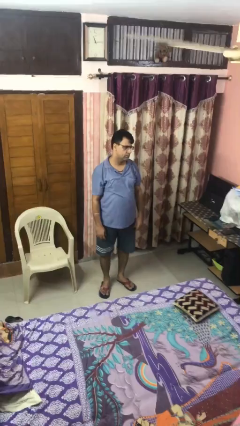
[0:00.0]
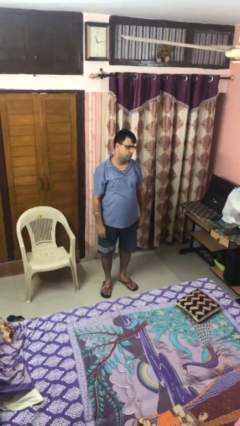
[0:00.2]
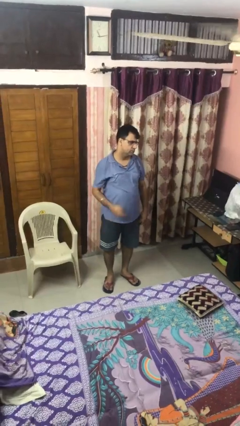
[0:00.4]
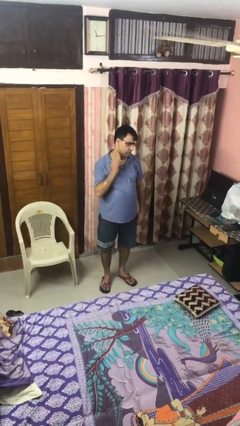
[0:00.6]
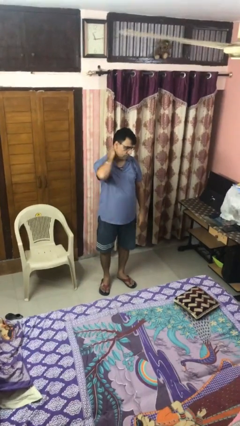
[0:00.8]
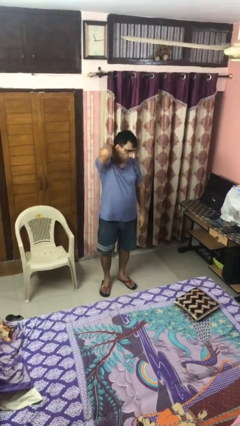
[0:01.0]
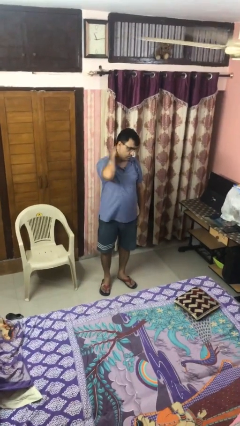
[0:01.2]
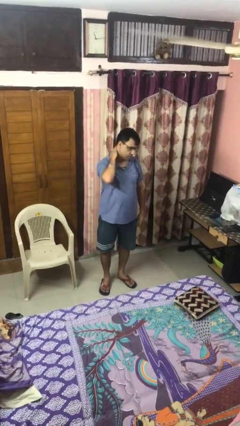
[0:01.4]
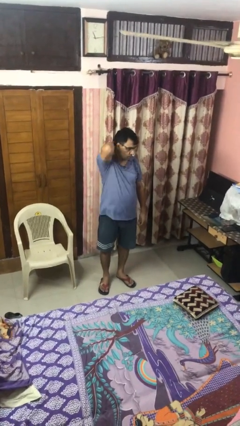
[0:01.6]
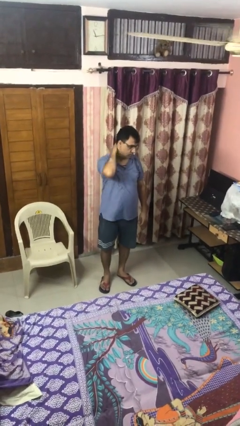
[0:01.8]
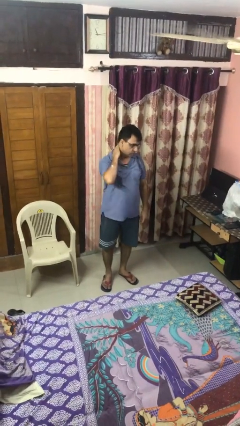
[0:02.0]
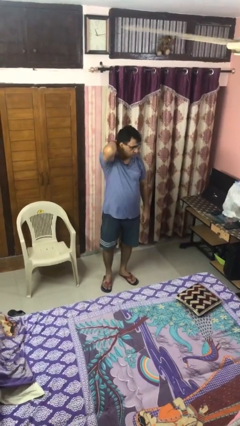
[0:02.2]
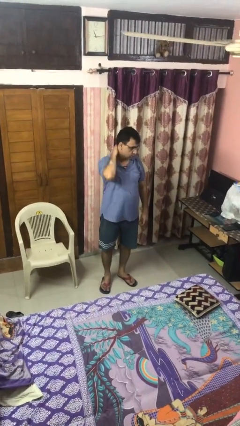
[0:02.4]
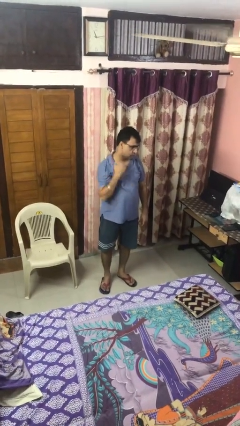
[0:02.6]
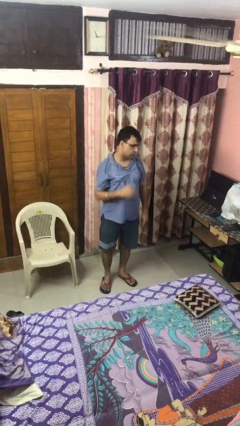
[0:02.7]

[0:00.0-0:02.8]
person rubs neck

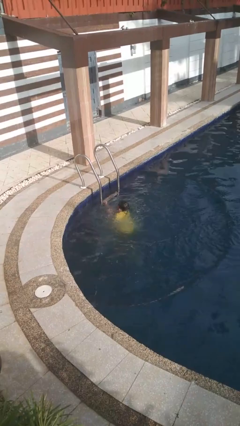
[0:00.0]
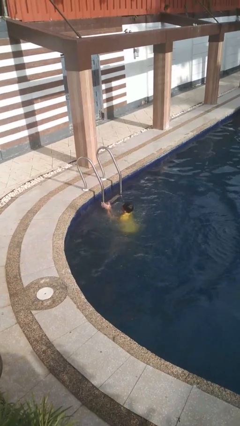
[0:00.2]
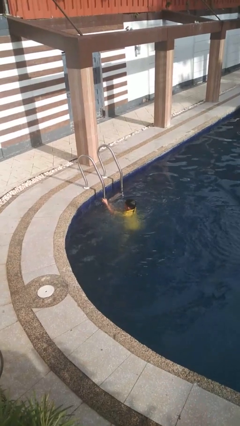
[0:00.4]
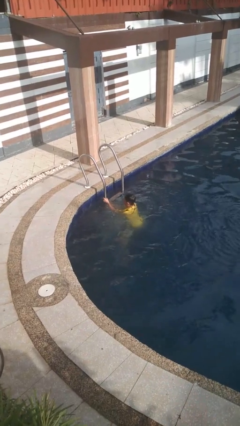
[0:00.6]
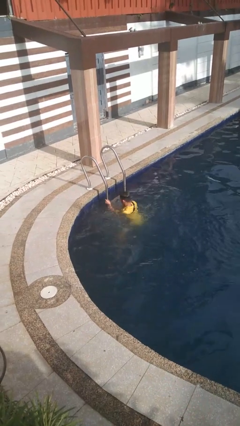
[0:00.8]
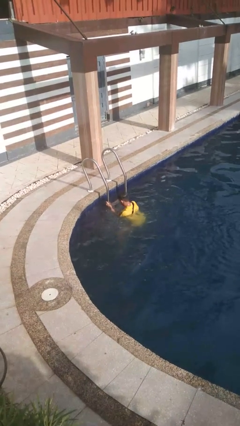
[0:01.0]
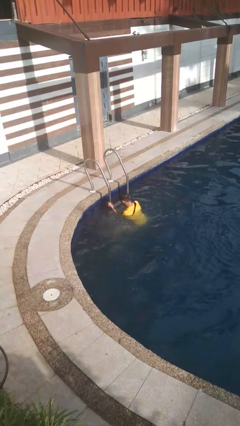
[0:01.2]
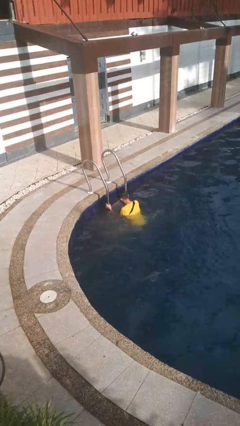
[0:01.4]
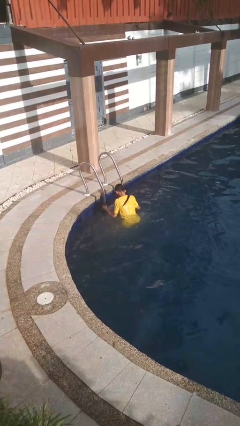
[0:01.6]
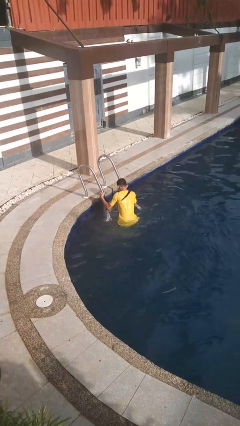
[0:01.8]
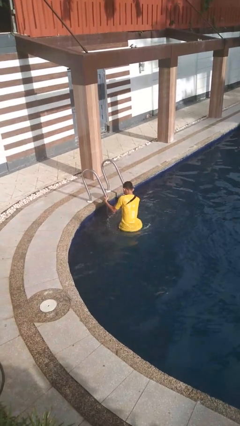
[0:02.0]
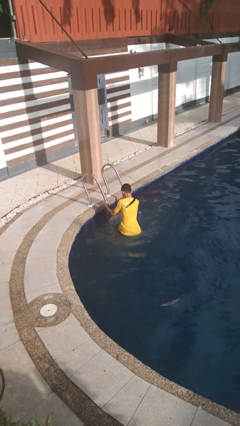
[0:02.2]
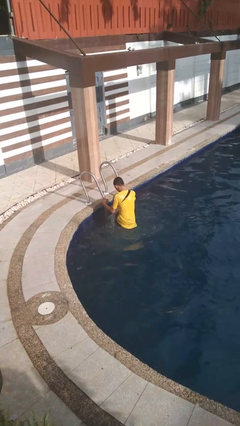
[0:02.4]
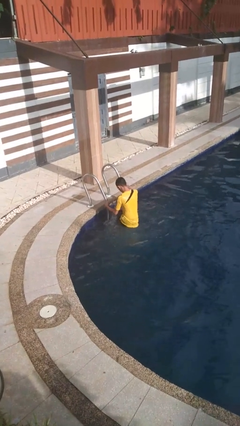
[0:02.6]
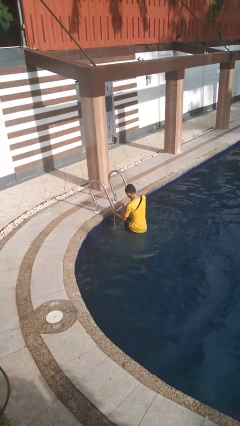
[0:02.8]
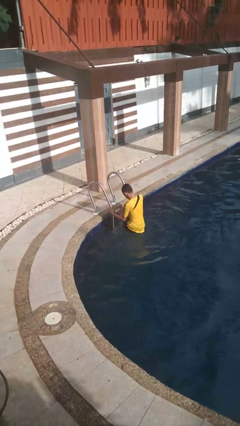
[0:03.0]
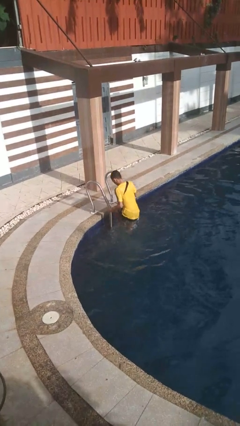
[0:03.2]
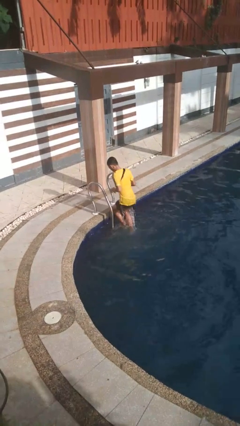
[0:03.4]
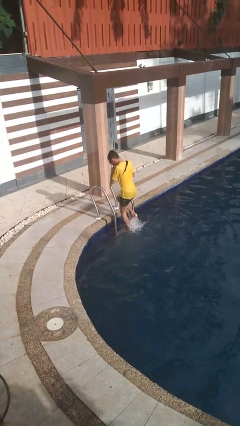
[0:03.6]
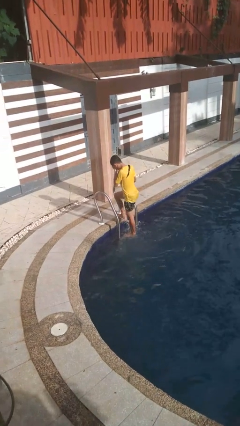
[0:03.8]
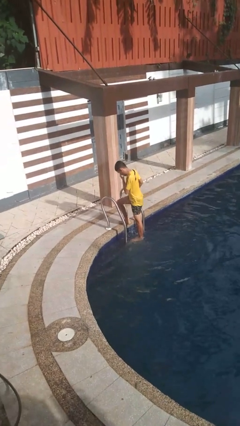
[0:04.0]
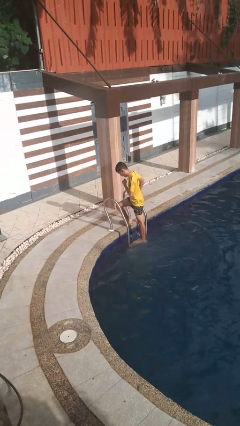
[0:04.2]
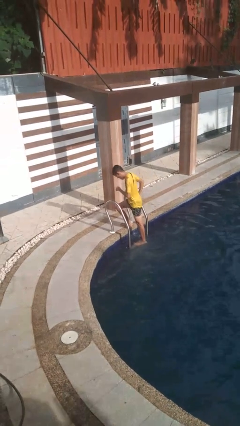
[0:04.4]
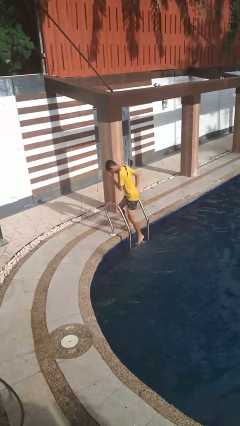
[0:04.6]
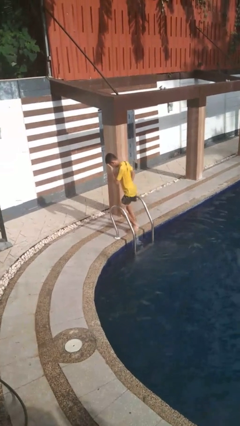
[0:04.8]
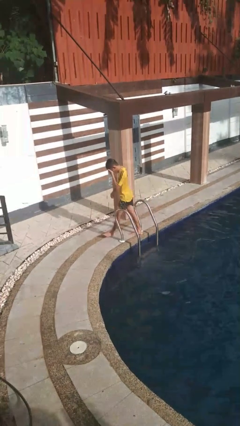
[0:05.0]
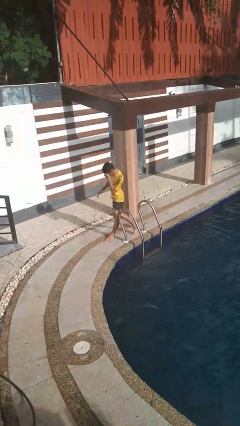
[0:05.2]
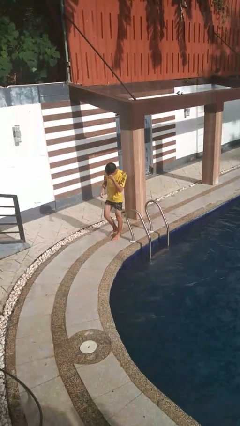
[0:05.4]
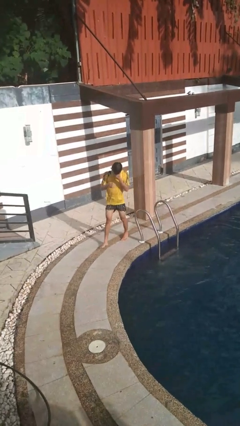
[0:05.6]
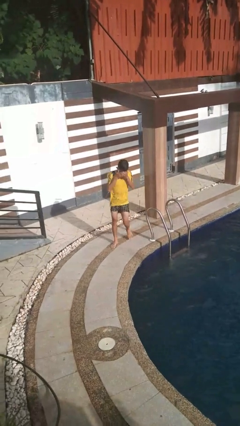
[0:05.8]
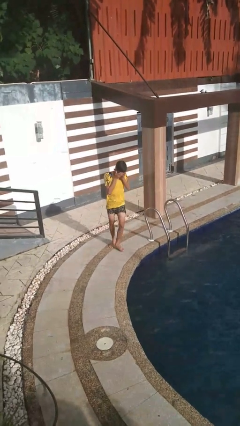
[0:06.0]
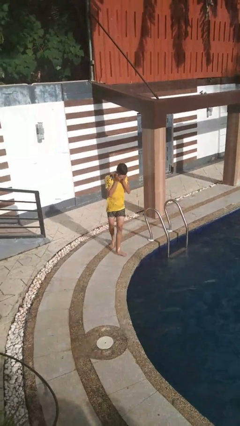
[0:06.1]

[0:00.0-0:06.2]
person exits pool

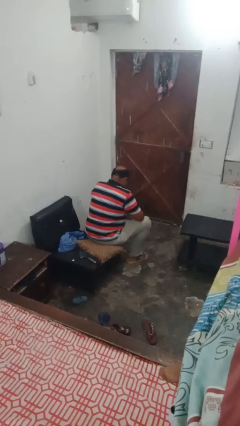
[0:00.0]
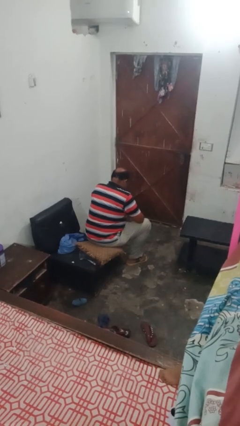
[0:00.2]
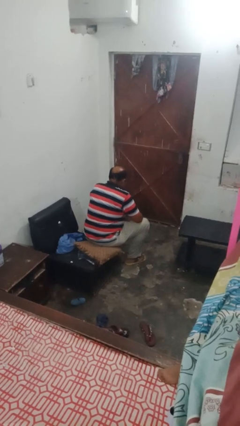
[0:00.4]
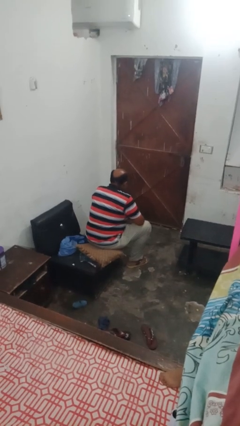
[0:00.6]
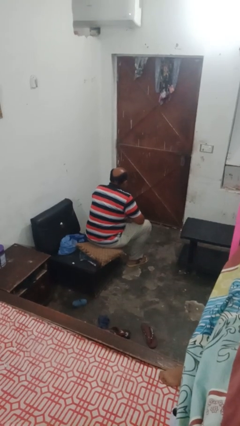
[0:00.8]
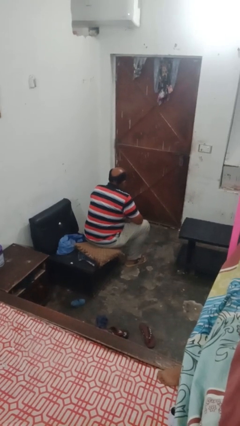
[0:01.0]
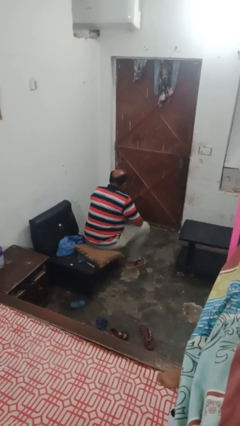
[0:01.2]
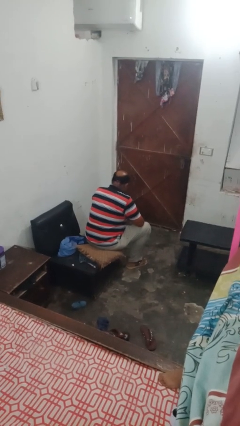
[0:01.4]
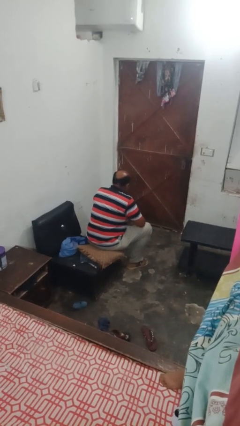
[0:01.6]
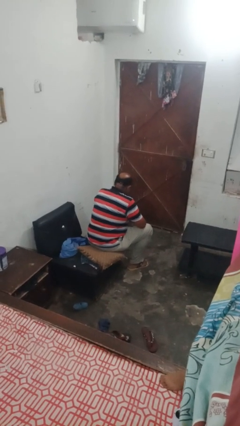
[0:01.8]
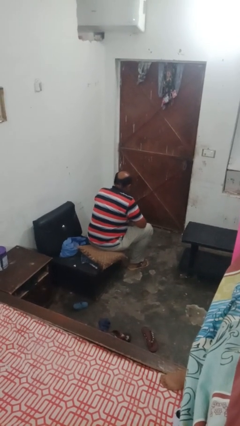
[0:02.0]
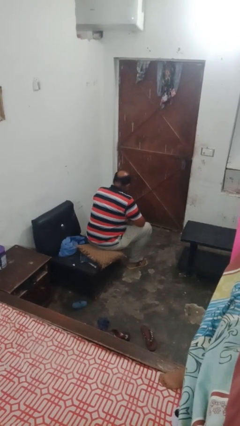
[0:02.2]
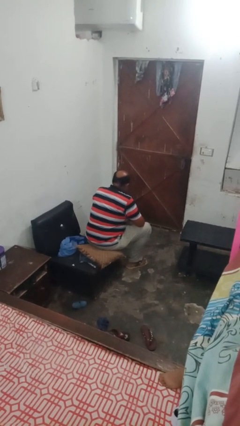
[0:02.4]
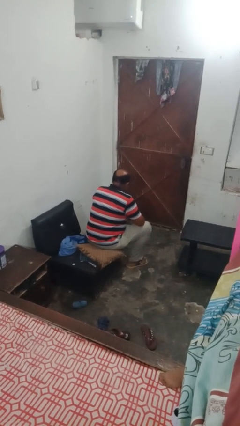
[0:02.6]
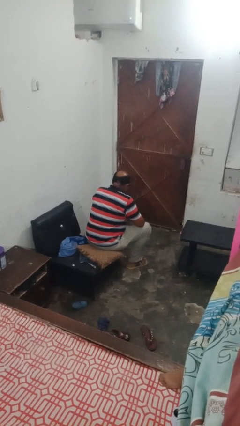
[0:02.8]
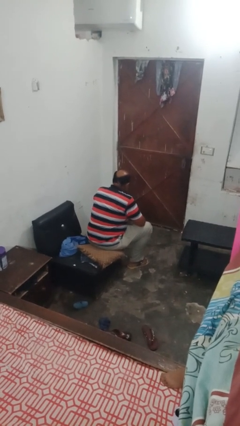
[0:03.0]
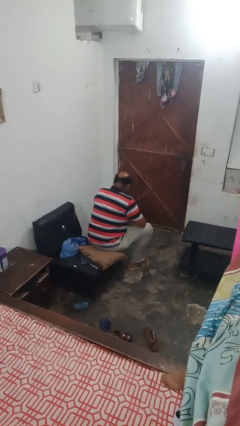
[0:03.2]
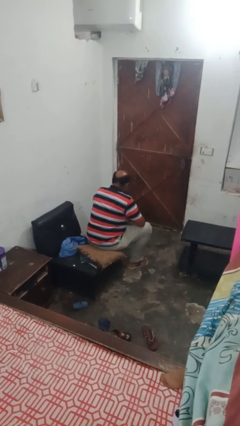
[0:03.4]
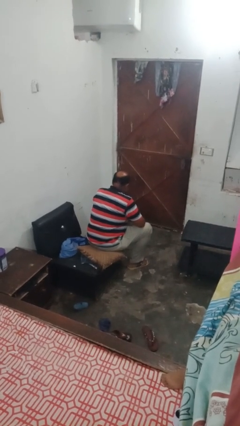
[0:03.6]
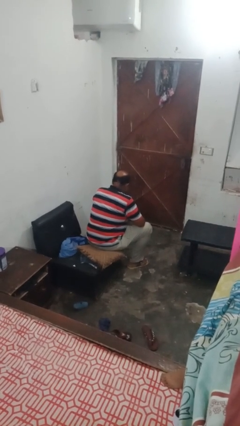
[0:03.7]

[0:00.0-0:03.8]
person nods head

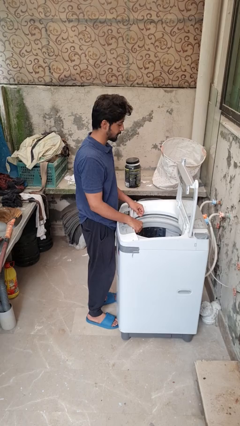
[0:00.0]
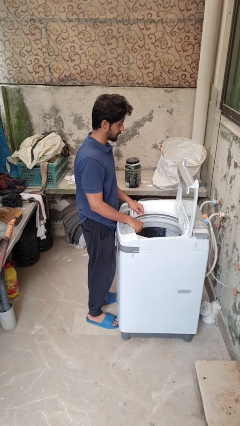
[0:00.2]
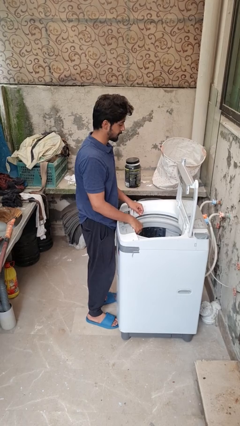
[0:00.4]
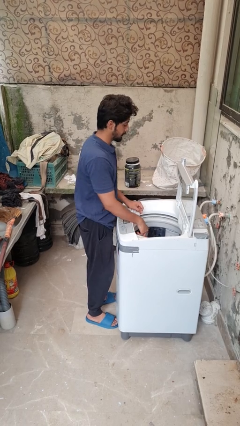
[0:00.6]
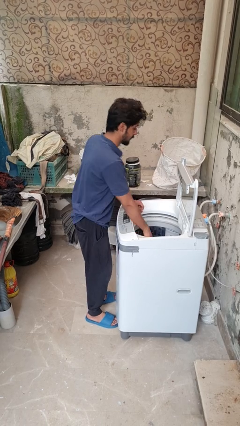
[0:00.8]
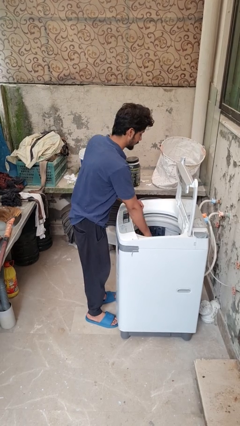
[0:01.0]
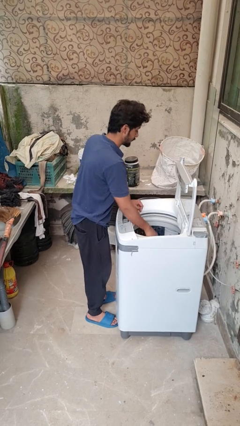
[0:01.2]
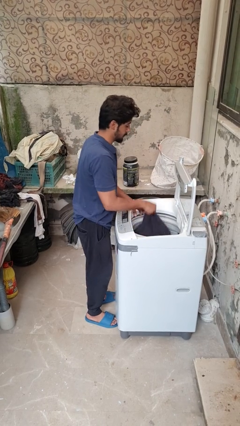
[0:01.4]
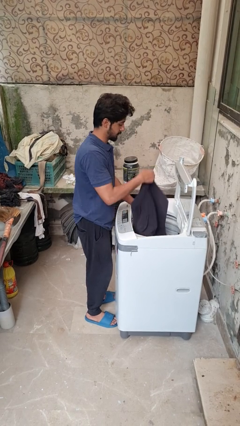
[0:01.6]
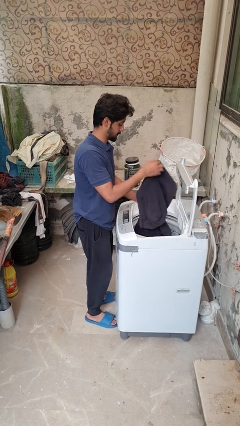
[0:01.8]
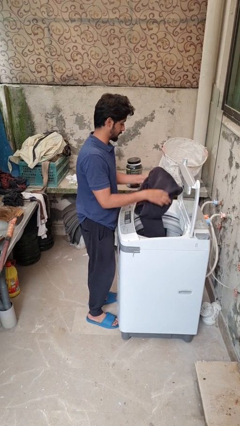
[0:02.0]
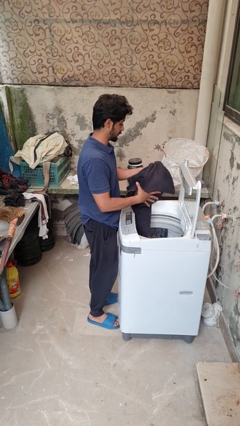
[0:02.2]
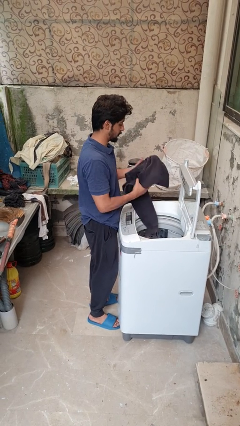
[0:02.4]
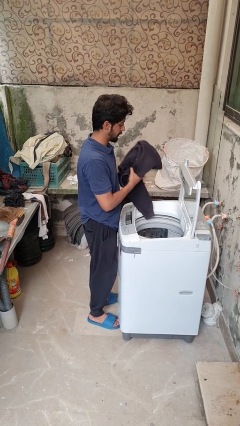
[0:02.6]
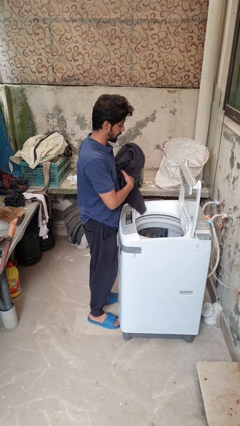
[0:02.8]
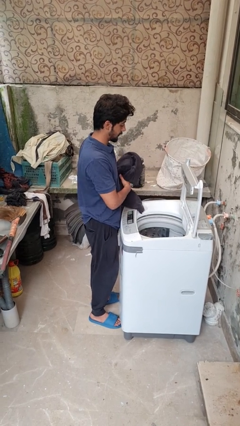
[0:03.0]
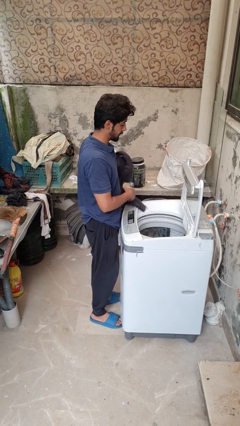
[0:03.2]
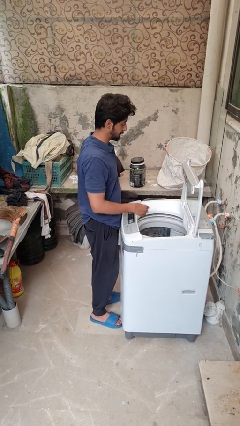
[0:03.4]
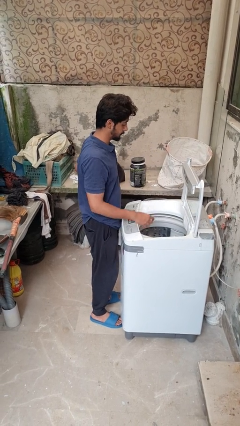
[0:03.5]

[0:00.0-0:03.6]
person unloads dryer

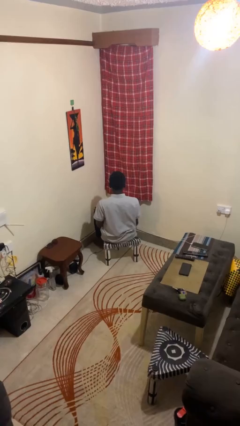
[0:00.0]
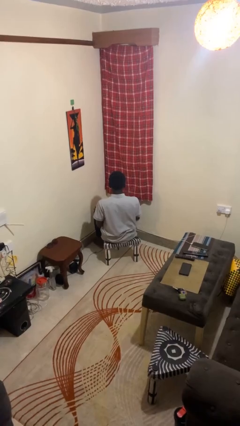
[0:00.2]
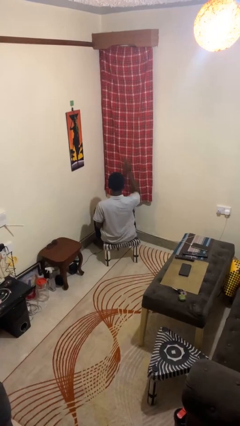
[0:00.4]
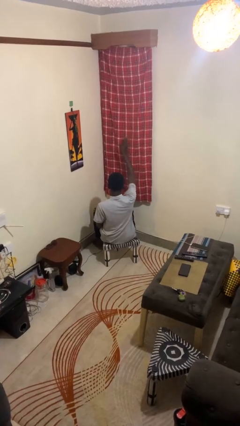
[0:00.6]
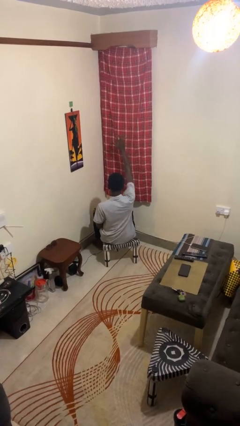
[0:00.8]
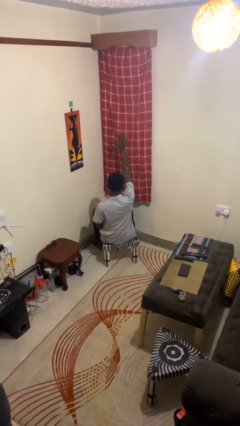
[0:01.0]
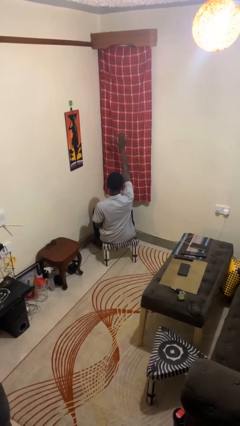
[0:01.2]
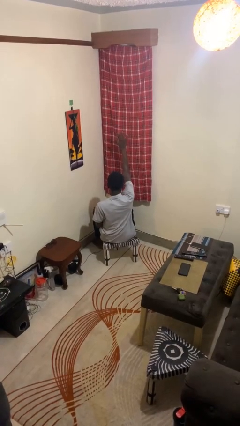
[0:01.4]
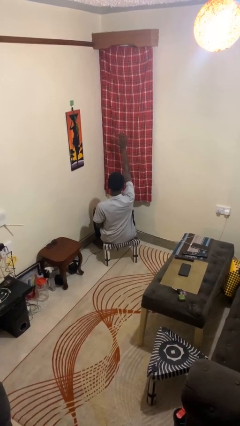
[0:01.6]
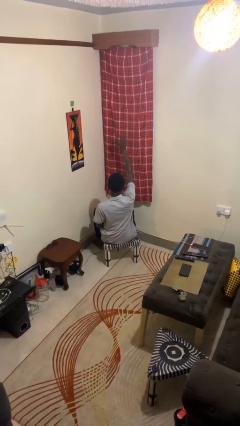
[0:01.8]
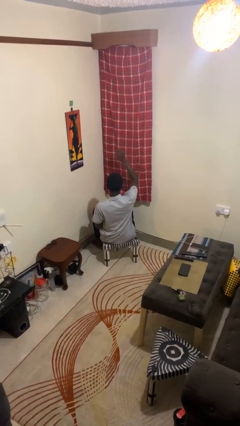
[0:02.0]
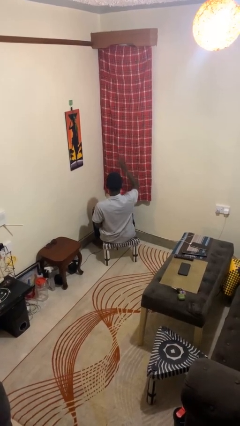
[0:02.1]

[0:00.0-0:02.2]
person gestures raise hand
